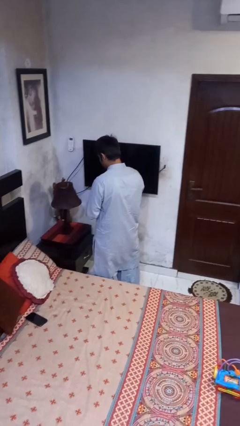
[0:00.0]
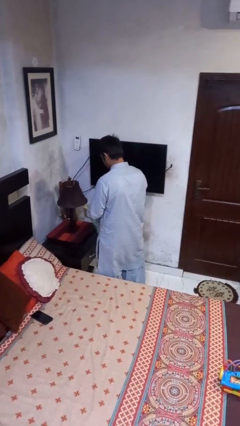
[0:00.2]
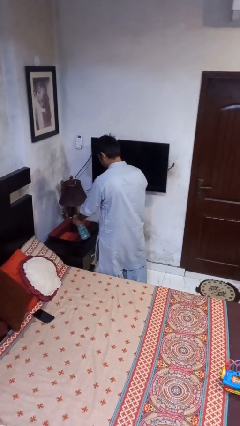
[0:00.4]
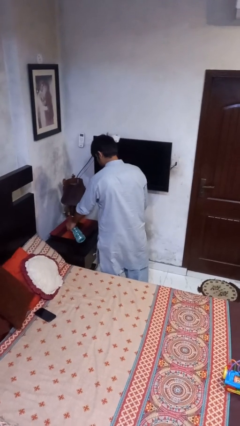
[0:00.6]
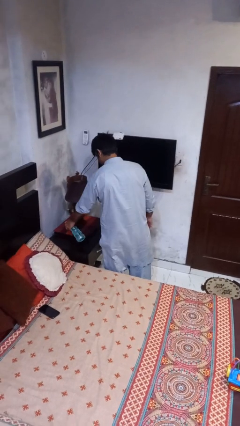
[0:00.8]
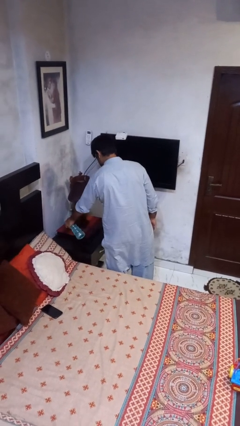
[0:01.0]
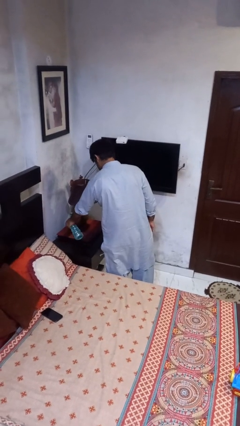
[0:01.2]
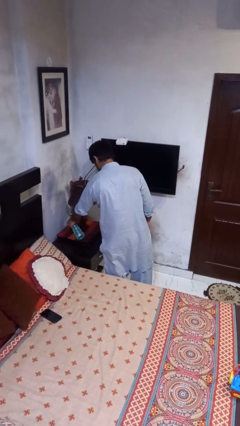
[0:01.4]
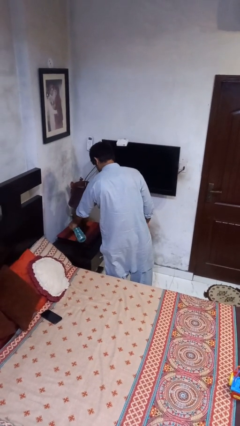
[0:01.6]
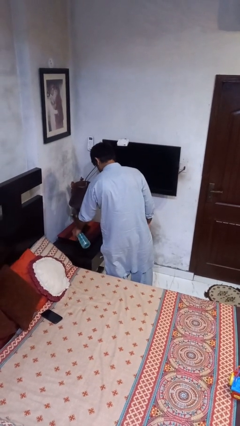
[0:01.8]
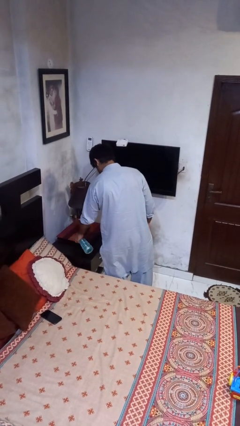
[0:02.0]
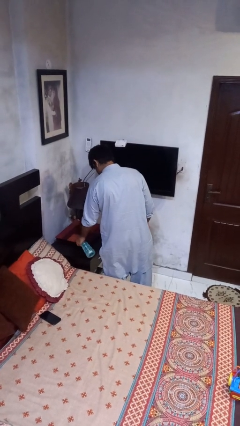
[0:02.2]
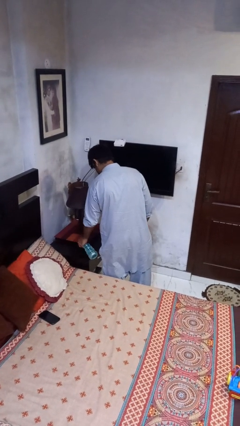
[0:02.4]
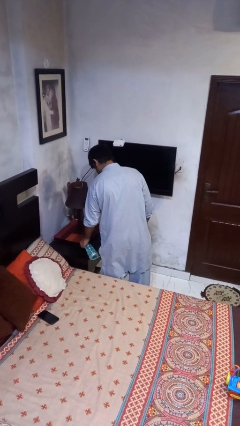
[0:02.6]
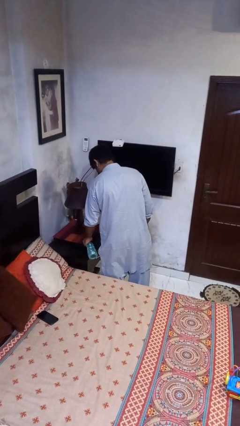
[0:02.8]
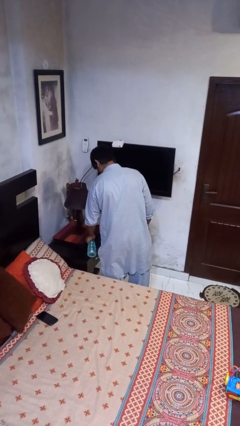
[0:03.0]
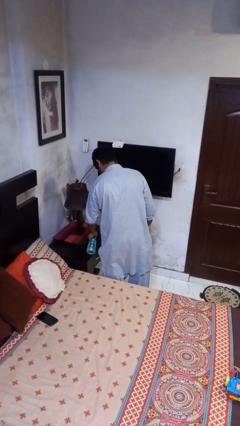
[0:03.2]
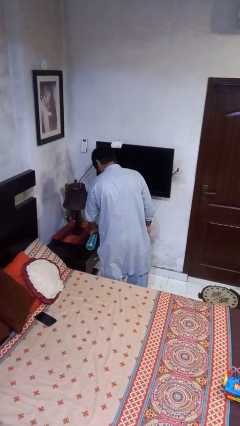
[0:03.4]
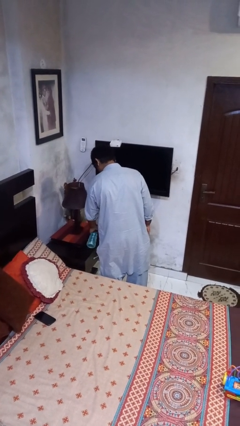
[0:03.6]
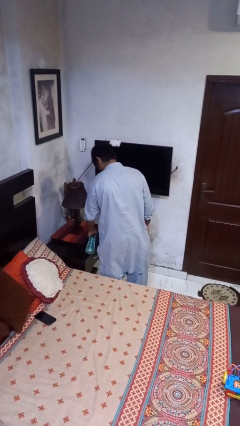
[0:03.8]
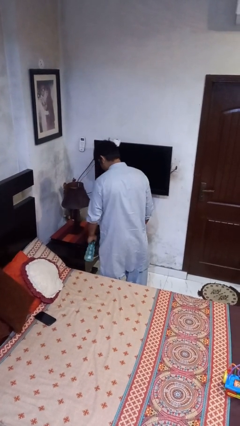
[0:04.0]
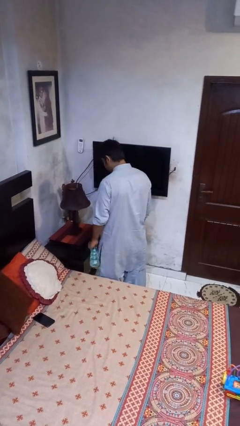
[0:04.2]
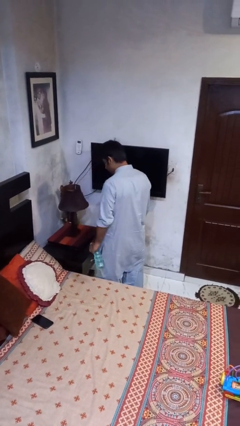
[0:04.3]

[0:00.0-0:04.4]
person sprays from bottle

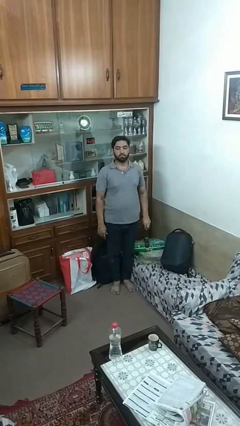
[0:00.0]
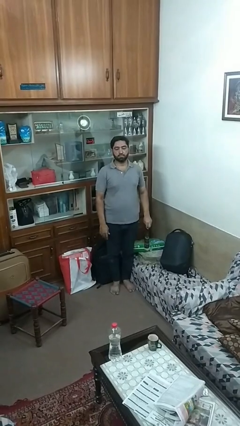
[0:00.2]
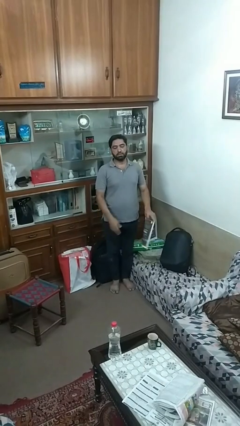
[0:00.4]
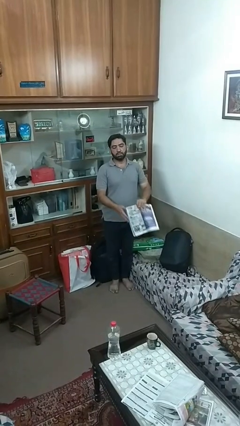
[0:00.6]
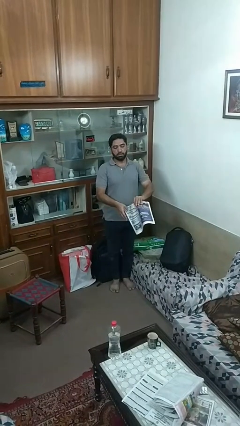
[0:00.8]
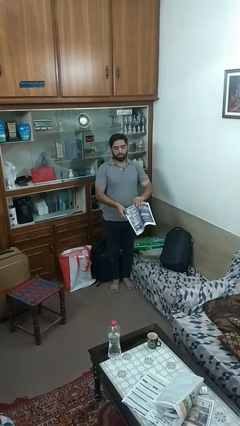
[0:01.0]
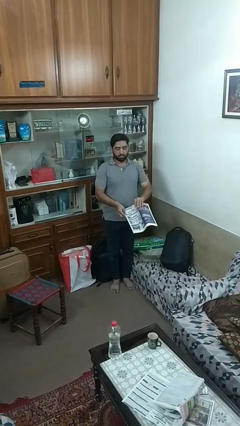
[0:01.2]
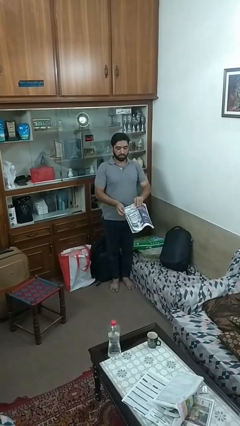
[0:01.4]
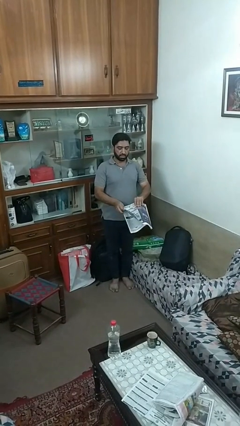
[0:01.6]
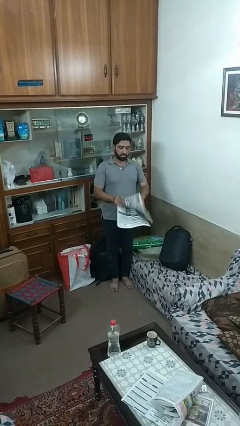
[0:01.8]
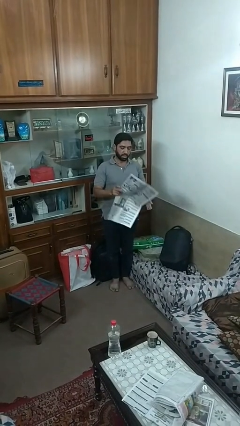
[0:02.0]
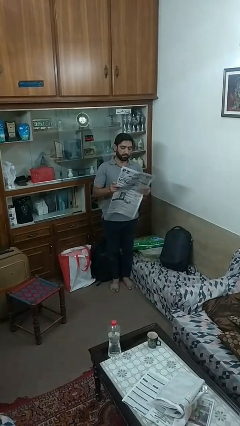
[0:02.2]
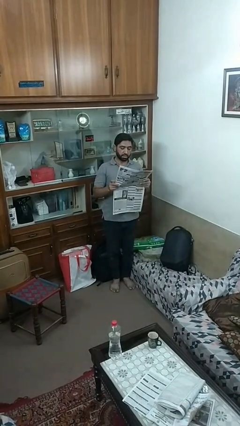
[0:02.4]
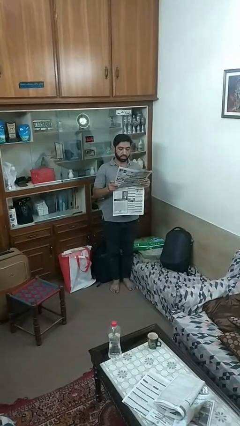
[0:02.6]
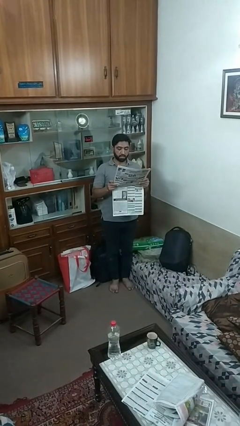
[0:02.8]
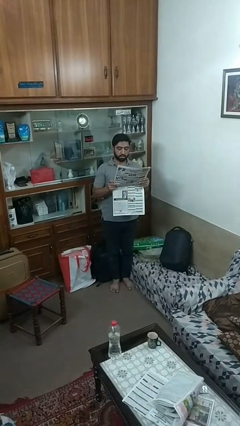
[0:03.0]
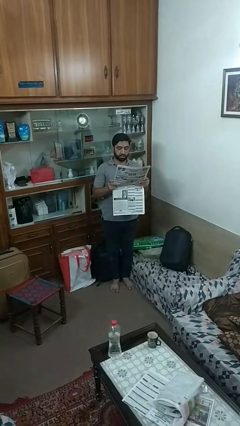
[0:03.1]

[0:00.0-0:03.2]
person reads newspaper

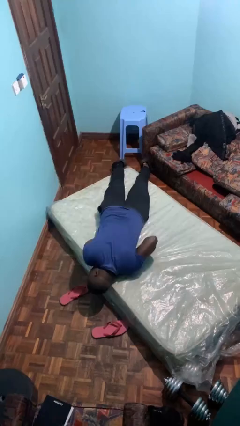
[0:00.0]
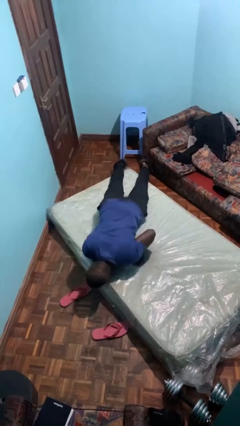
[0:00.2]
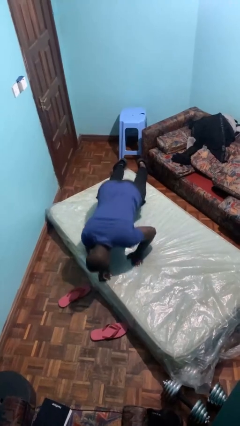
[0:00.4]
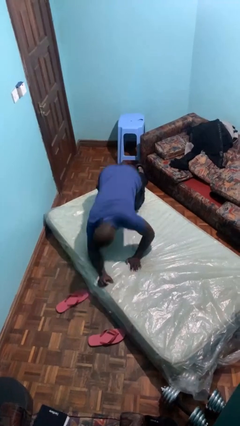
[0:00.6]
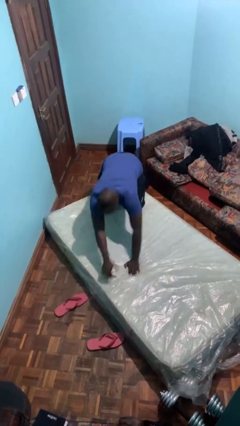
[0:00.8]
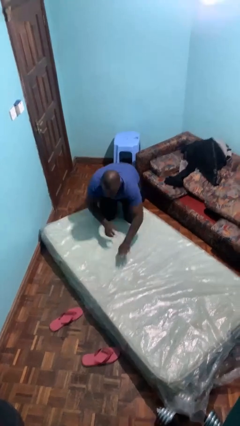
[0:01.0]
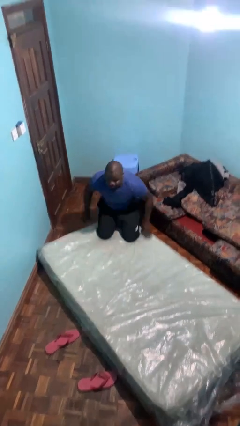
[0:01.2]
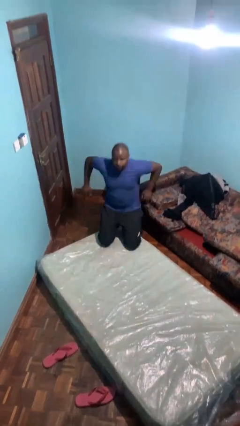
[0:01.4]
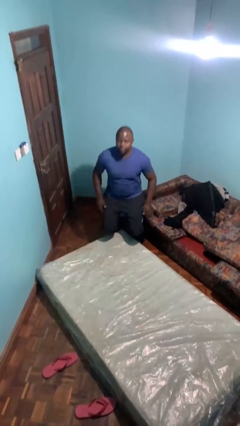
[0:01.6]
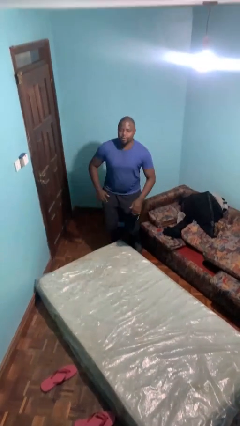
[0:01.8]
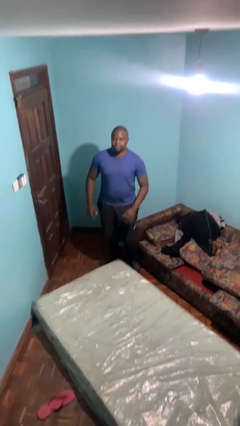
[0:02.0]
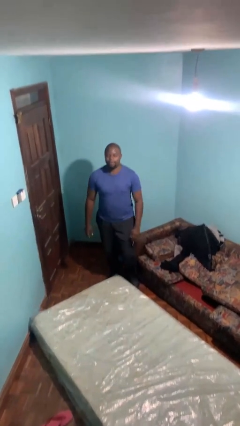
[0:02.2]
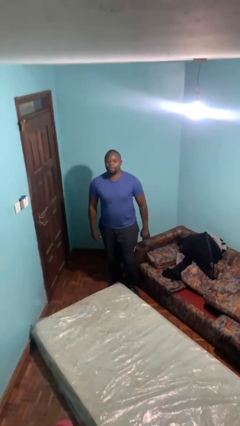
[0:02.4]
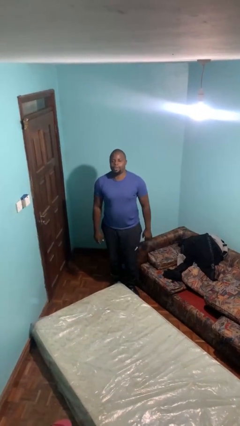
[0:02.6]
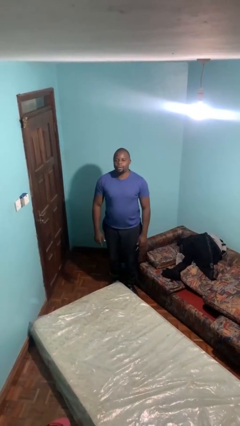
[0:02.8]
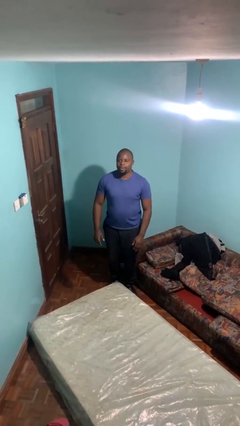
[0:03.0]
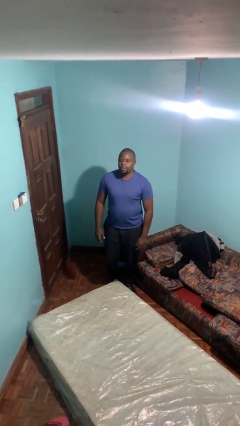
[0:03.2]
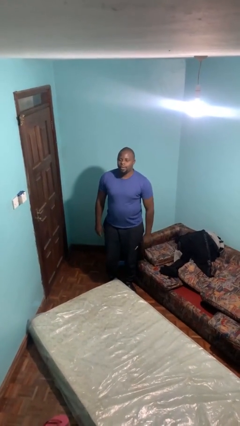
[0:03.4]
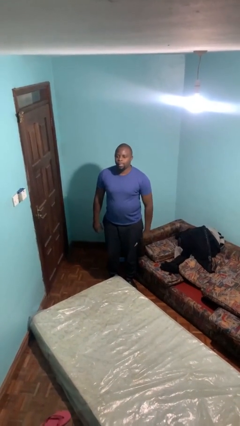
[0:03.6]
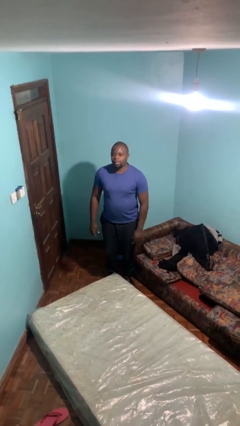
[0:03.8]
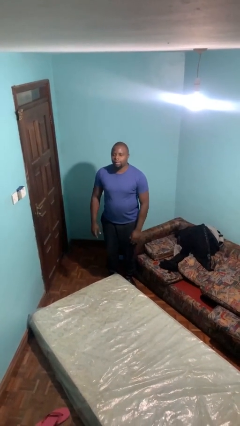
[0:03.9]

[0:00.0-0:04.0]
person stands up

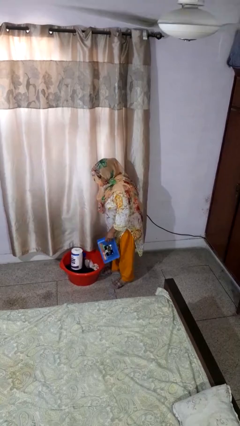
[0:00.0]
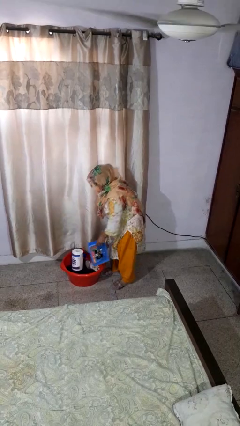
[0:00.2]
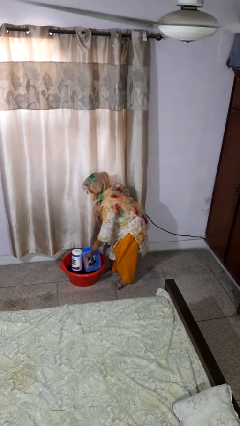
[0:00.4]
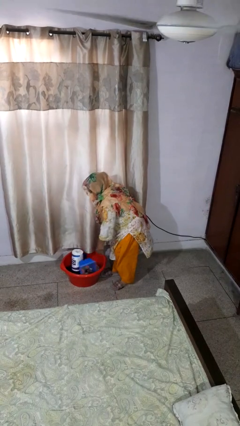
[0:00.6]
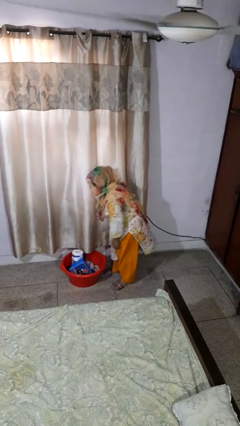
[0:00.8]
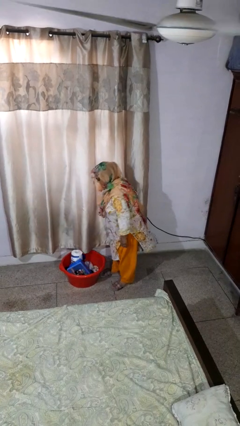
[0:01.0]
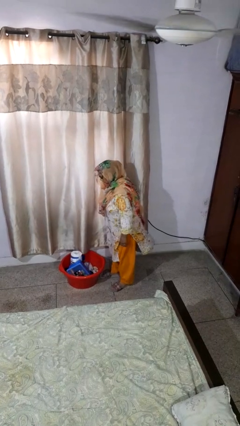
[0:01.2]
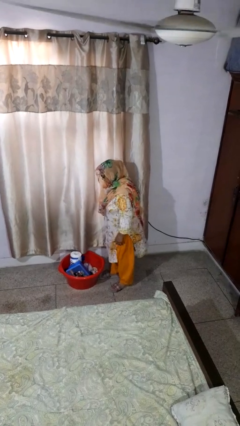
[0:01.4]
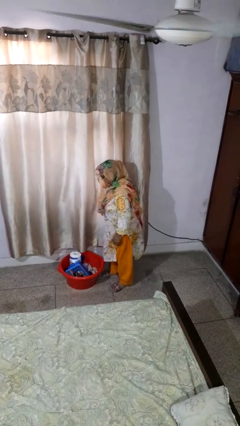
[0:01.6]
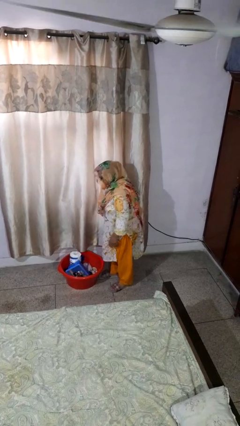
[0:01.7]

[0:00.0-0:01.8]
person puts object into basket

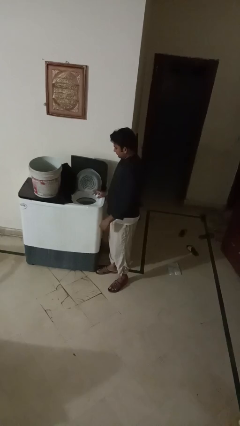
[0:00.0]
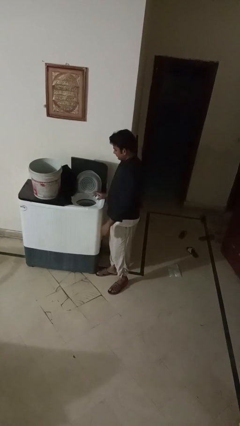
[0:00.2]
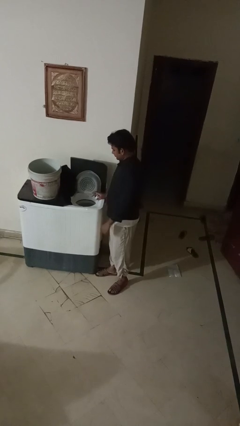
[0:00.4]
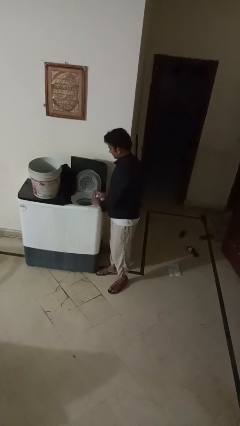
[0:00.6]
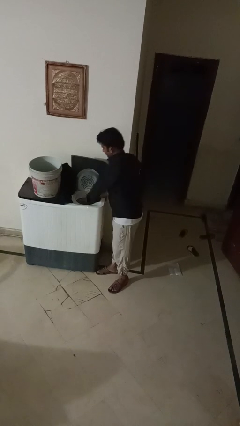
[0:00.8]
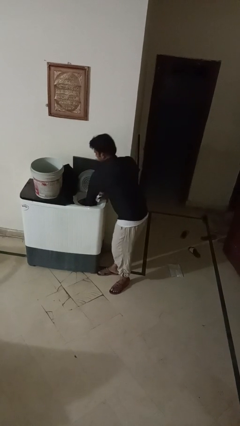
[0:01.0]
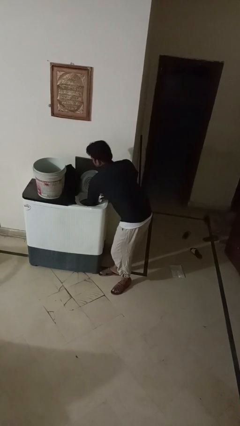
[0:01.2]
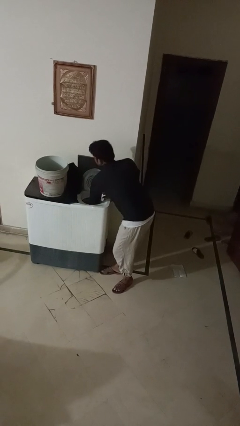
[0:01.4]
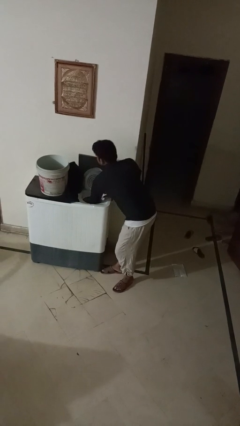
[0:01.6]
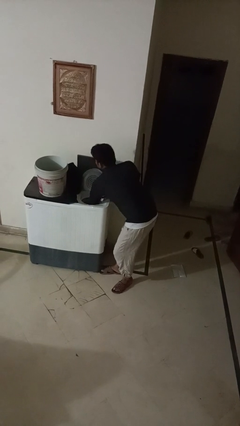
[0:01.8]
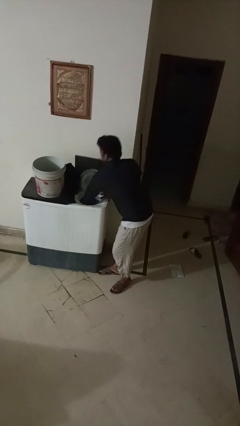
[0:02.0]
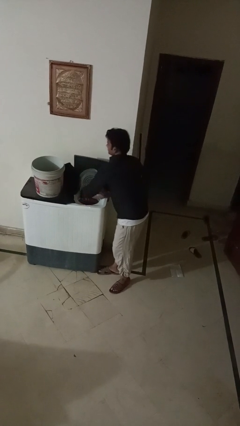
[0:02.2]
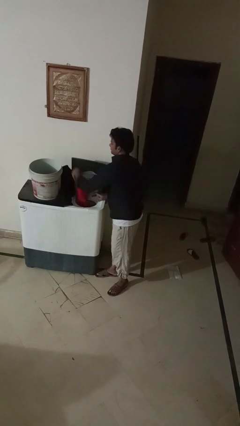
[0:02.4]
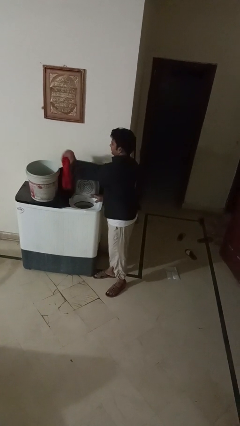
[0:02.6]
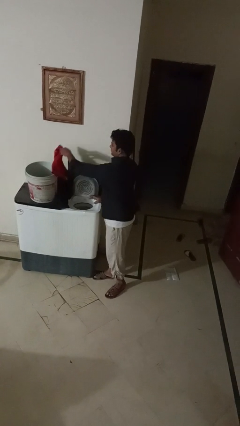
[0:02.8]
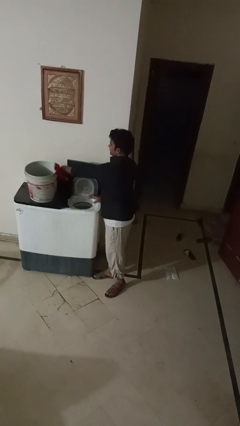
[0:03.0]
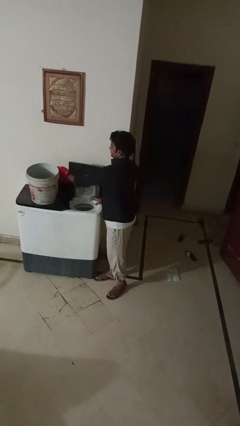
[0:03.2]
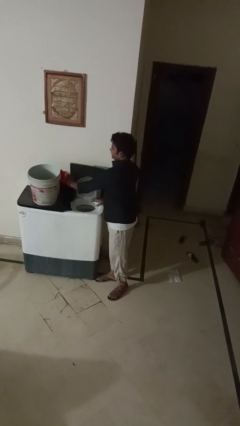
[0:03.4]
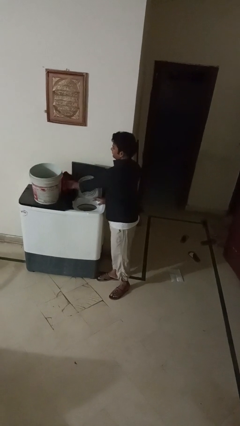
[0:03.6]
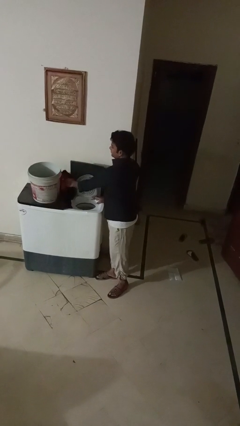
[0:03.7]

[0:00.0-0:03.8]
person unloads dryer

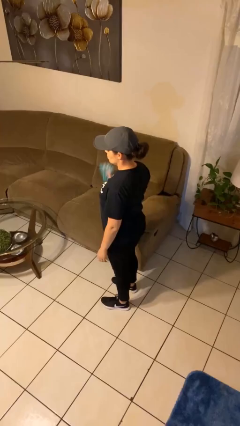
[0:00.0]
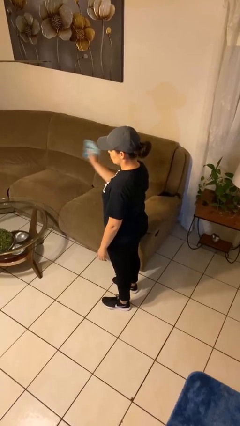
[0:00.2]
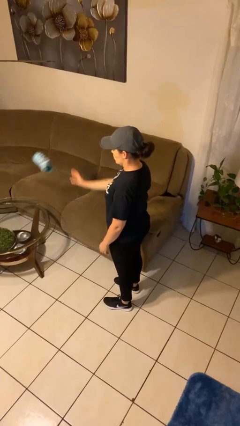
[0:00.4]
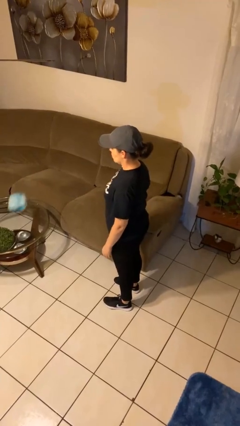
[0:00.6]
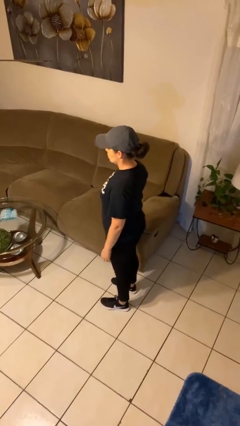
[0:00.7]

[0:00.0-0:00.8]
person throws object on table
